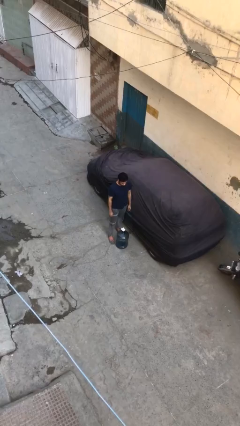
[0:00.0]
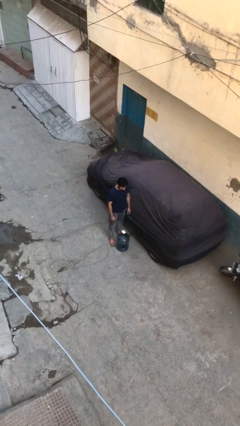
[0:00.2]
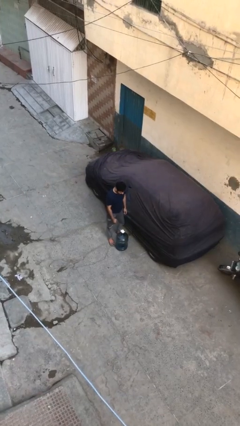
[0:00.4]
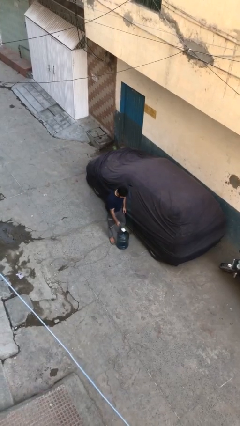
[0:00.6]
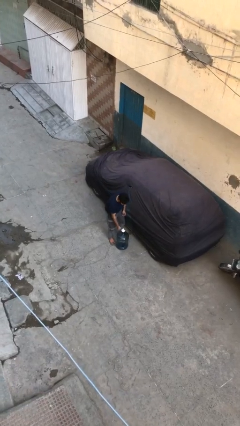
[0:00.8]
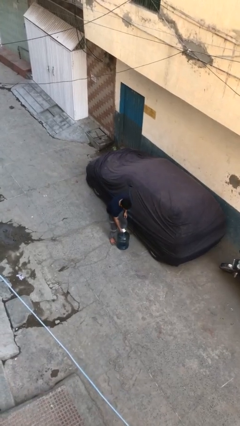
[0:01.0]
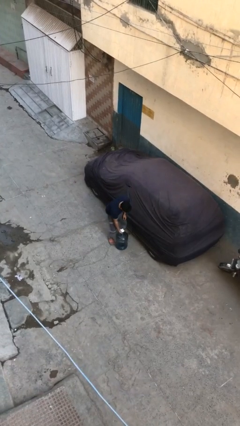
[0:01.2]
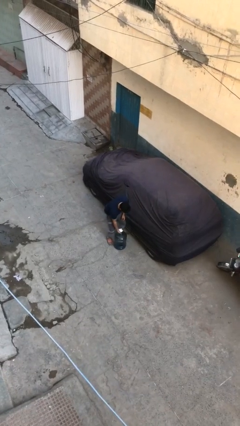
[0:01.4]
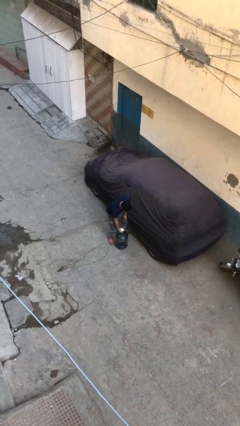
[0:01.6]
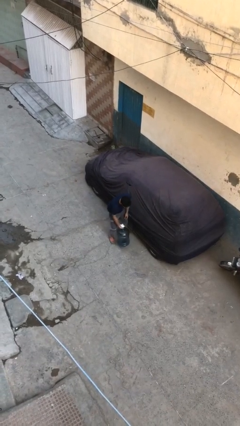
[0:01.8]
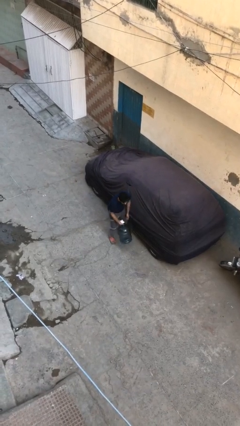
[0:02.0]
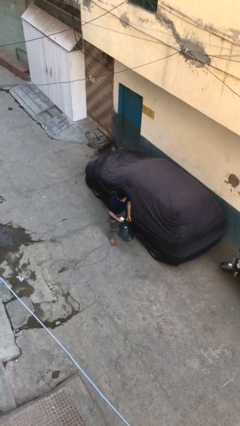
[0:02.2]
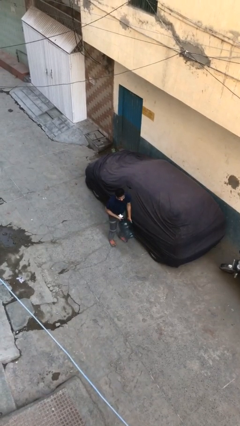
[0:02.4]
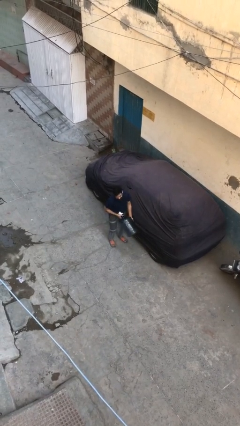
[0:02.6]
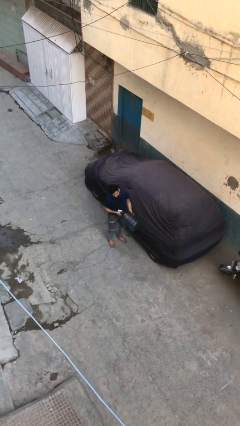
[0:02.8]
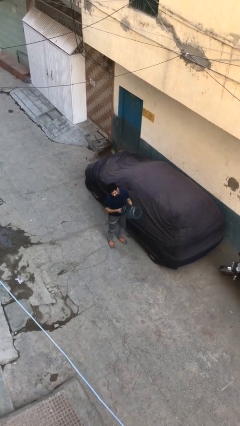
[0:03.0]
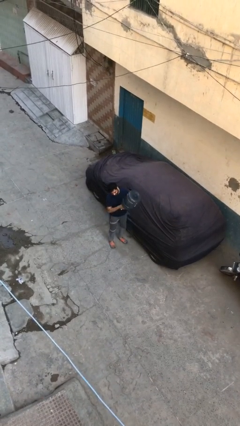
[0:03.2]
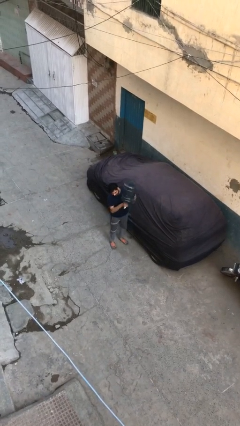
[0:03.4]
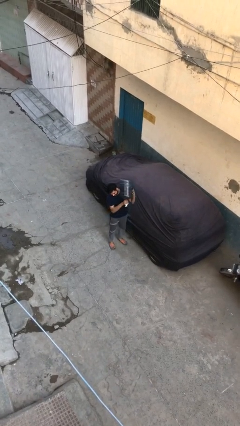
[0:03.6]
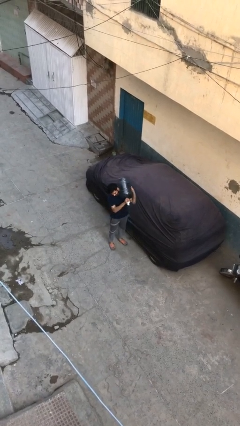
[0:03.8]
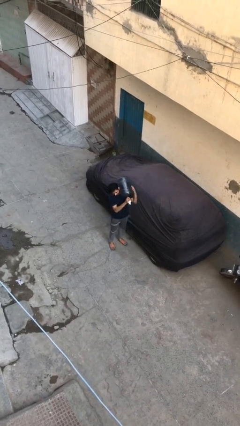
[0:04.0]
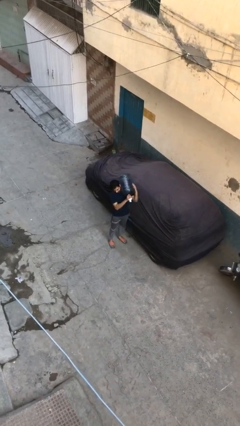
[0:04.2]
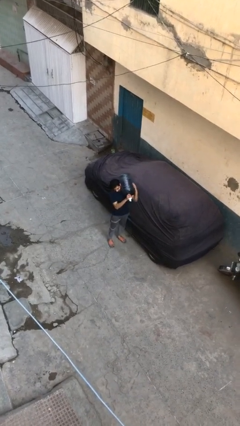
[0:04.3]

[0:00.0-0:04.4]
person picks up object from floor

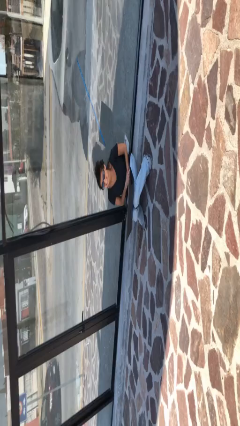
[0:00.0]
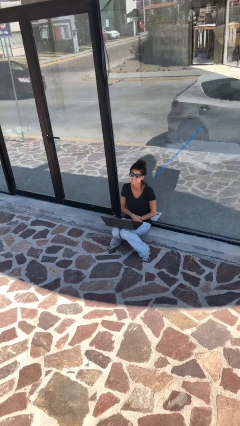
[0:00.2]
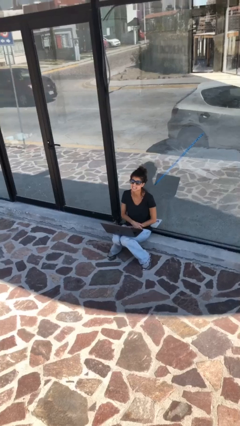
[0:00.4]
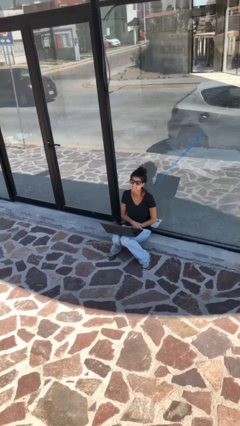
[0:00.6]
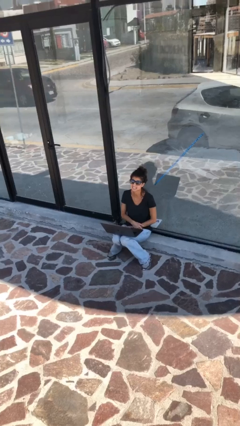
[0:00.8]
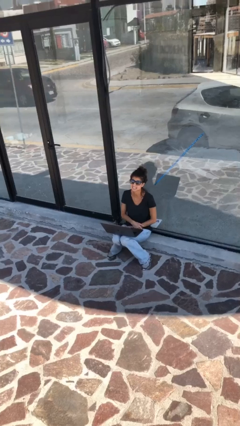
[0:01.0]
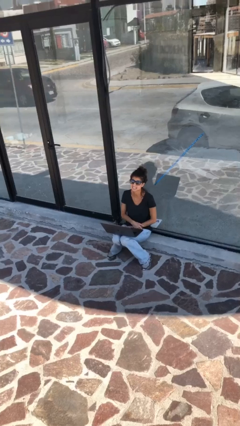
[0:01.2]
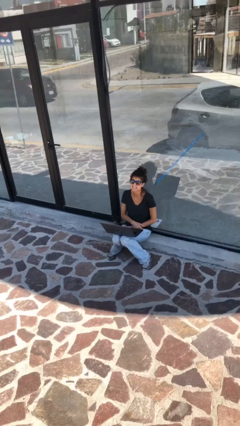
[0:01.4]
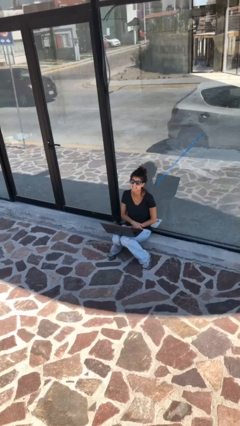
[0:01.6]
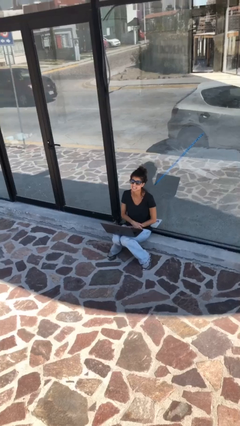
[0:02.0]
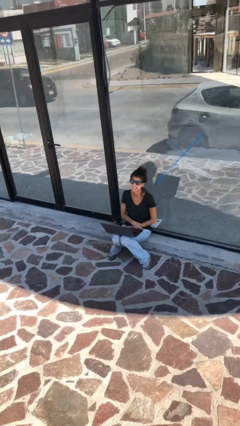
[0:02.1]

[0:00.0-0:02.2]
person interacts with laptop

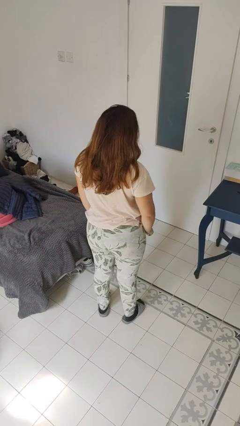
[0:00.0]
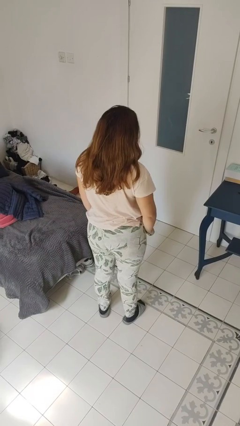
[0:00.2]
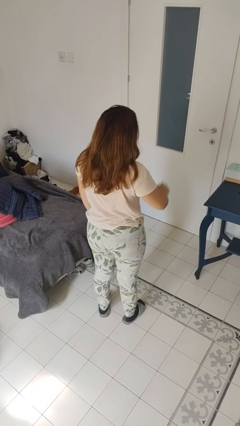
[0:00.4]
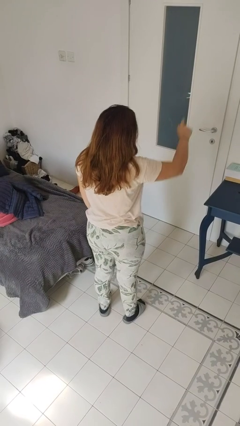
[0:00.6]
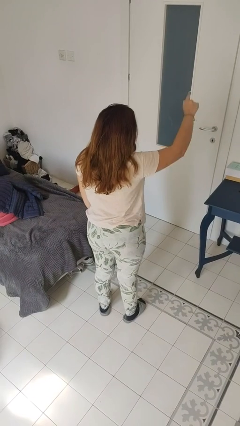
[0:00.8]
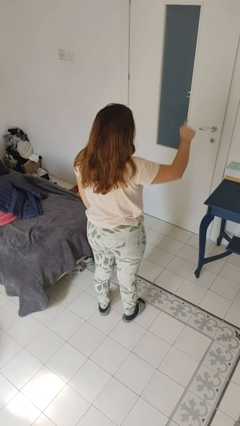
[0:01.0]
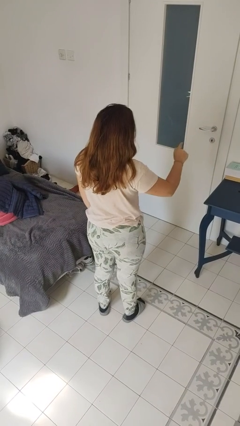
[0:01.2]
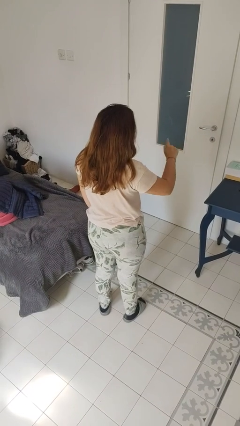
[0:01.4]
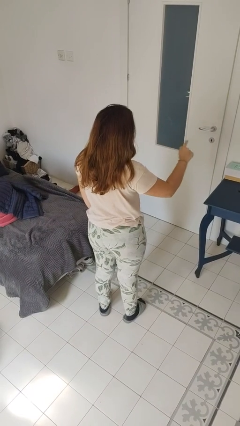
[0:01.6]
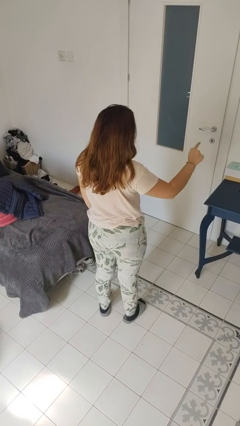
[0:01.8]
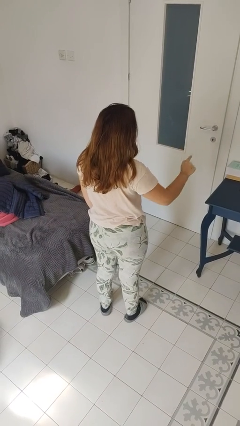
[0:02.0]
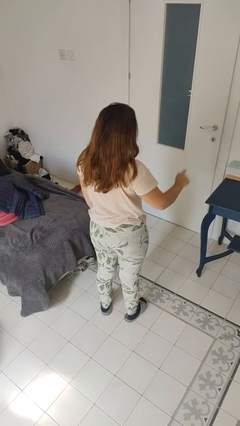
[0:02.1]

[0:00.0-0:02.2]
person gestures number one

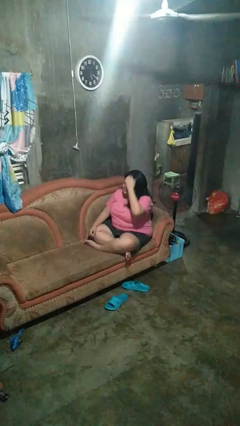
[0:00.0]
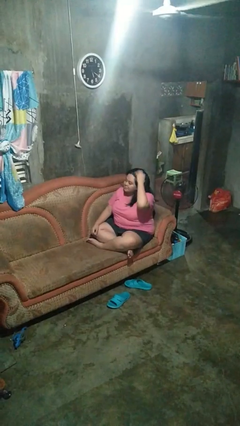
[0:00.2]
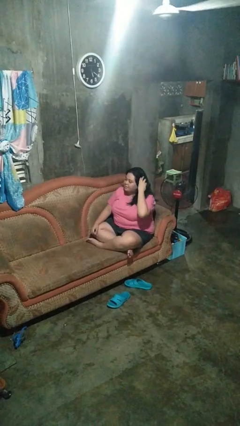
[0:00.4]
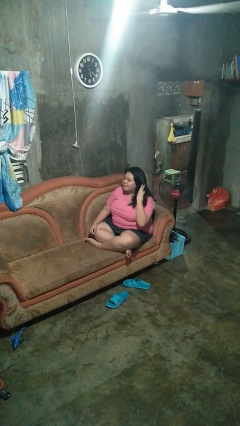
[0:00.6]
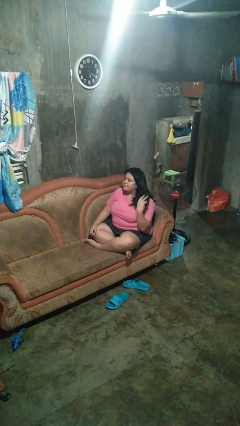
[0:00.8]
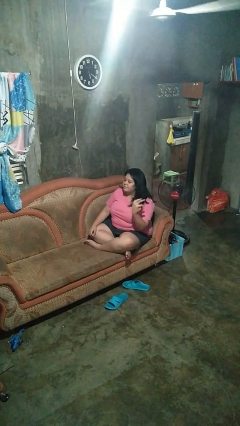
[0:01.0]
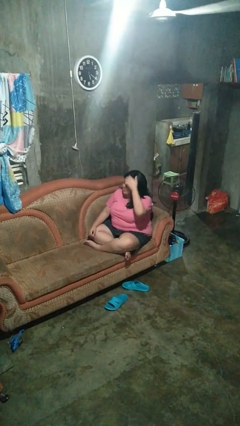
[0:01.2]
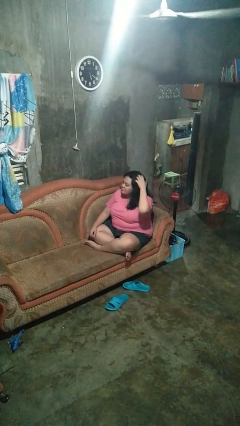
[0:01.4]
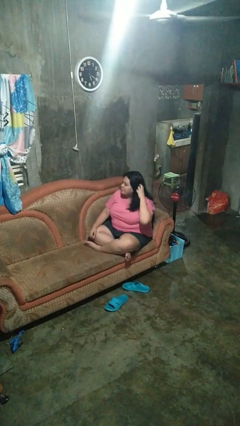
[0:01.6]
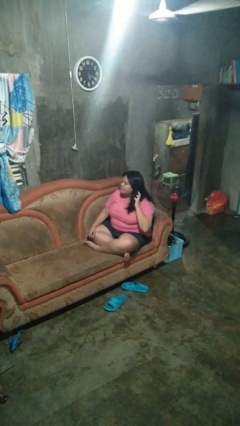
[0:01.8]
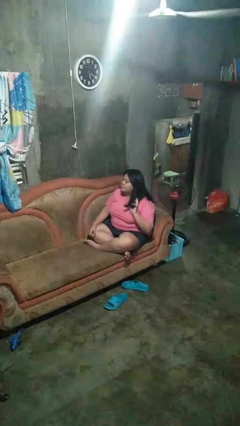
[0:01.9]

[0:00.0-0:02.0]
person strokes hair

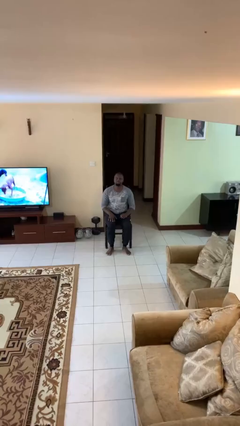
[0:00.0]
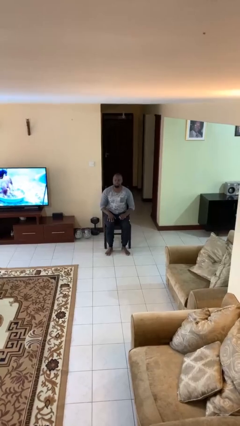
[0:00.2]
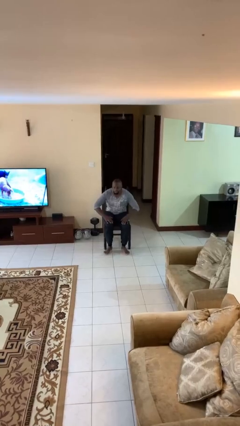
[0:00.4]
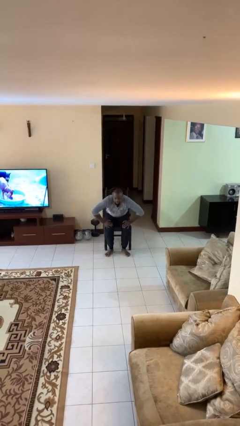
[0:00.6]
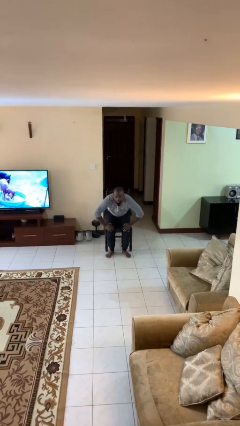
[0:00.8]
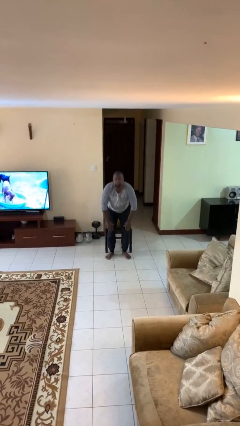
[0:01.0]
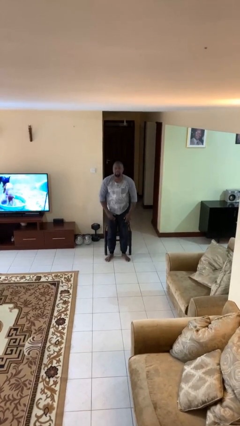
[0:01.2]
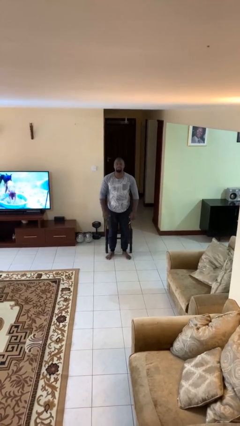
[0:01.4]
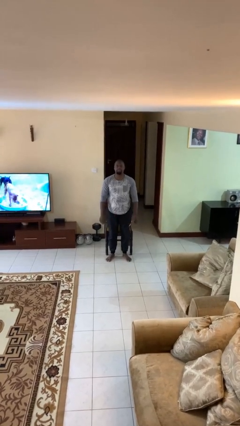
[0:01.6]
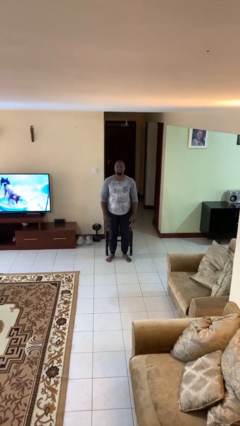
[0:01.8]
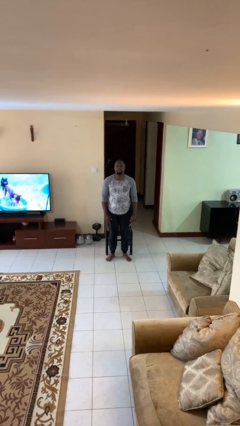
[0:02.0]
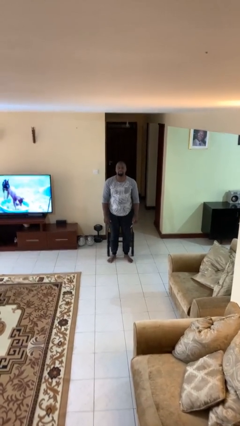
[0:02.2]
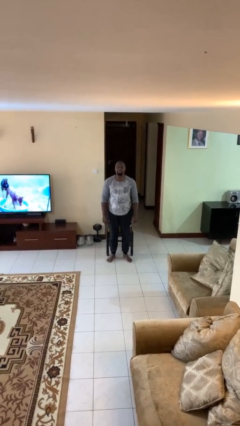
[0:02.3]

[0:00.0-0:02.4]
person stands up

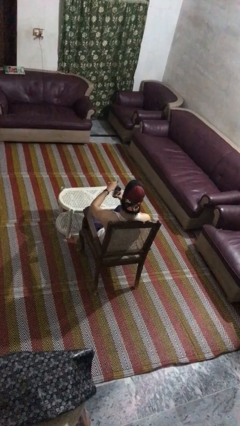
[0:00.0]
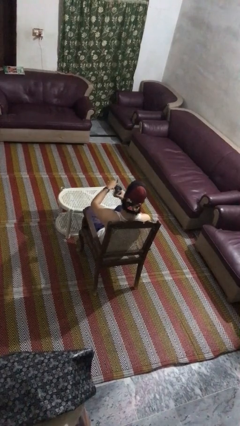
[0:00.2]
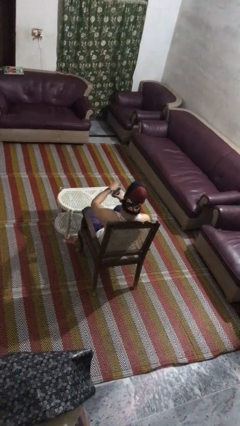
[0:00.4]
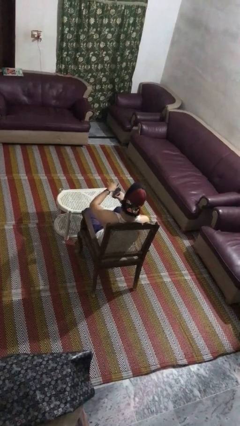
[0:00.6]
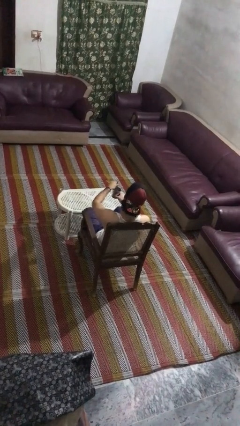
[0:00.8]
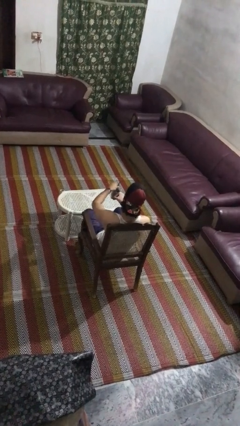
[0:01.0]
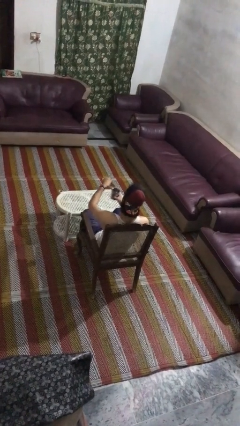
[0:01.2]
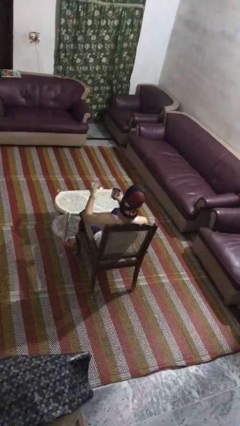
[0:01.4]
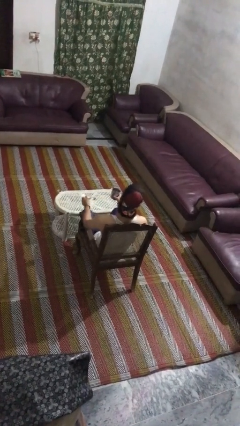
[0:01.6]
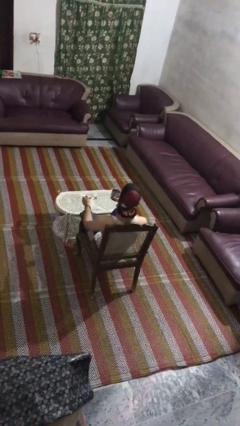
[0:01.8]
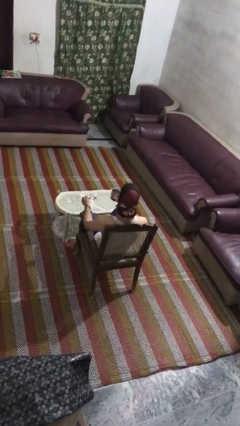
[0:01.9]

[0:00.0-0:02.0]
person stirs mug

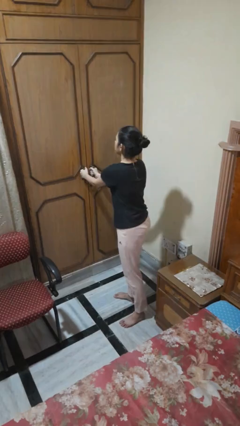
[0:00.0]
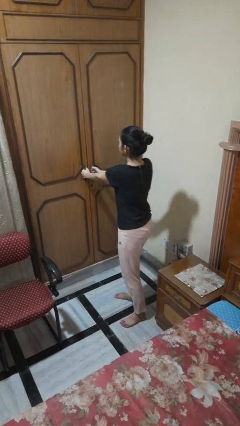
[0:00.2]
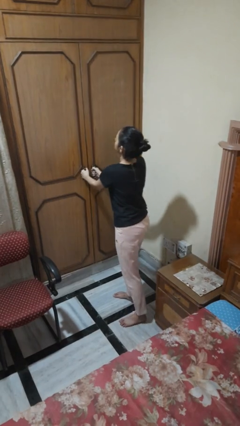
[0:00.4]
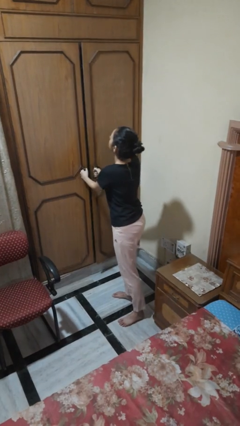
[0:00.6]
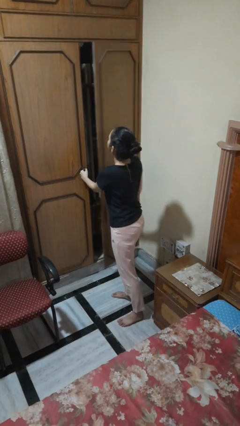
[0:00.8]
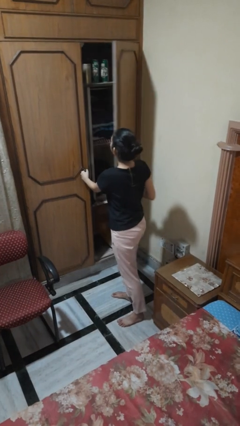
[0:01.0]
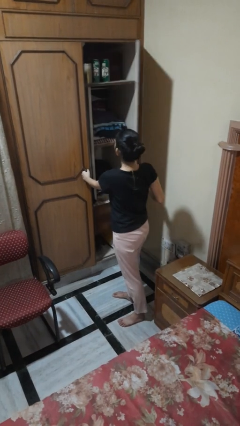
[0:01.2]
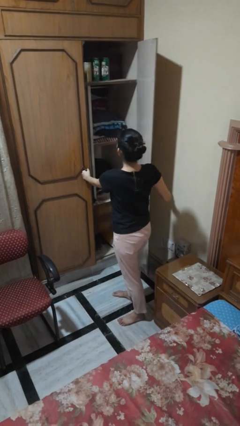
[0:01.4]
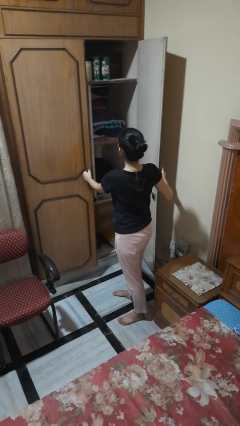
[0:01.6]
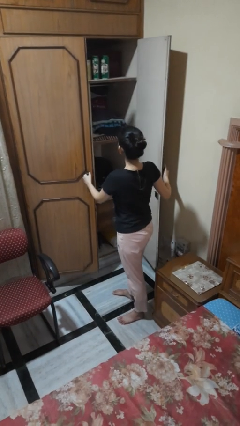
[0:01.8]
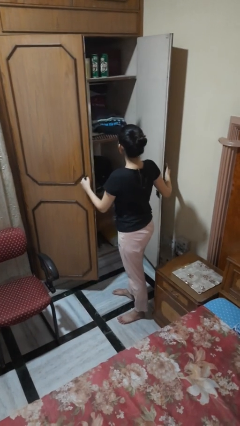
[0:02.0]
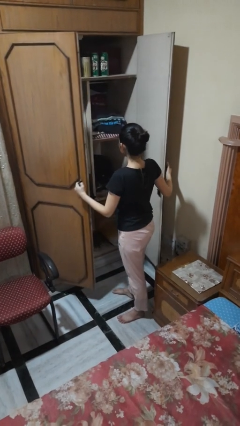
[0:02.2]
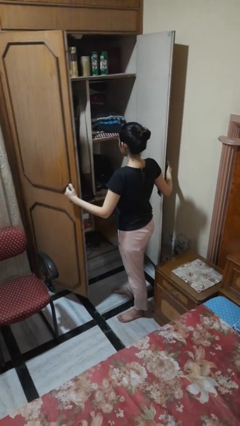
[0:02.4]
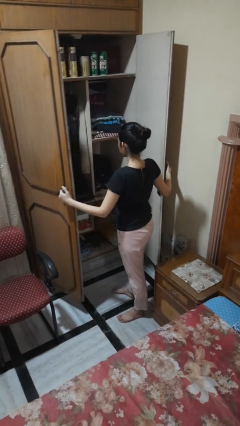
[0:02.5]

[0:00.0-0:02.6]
person opens closet door
